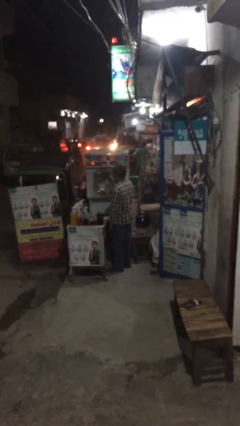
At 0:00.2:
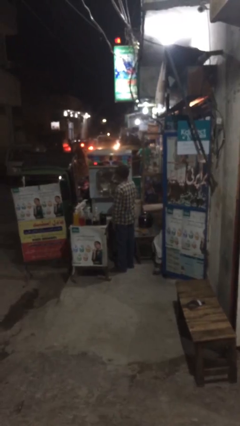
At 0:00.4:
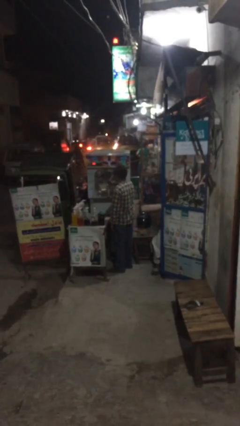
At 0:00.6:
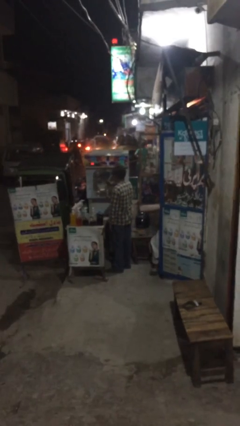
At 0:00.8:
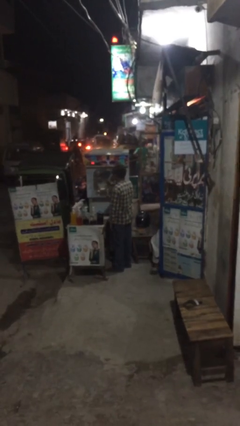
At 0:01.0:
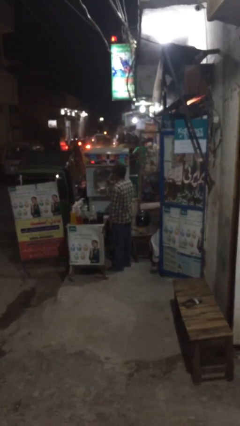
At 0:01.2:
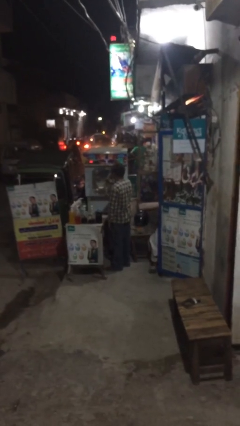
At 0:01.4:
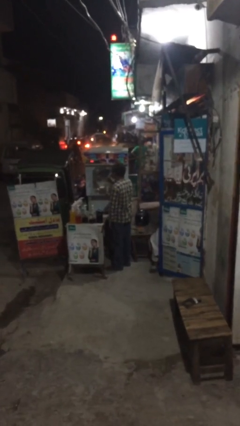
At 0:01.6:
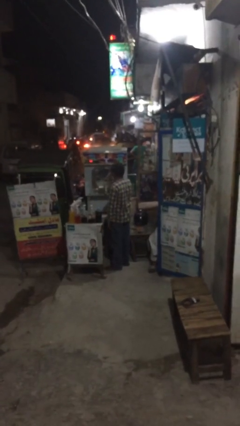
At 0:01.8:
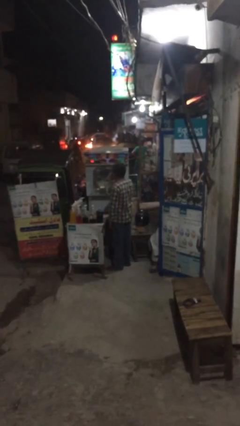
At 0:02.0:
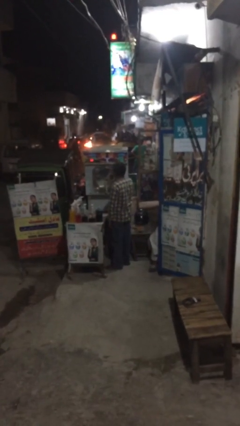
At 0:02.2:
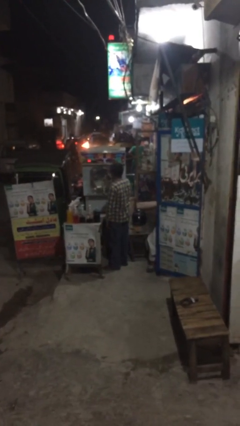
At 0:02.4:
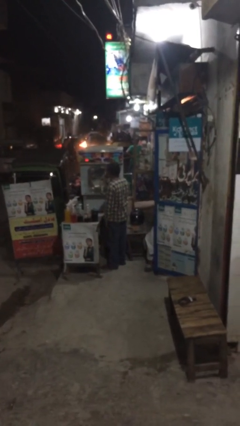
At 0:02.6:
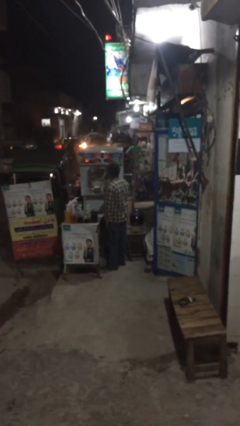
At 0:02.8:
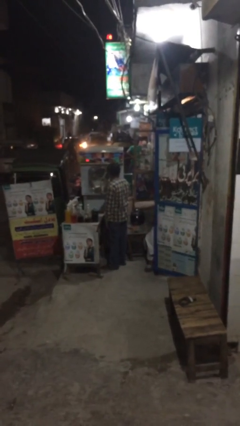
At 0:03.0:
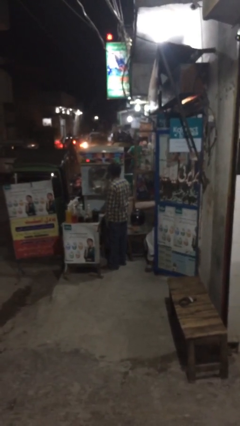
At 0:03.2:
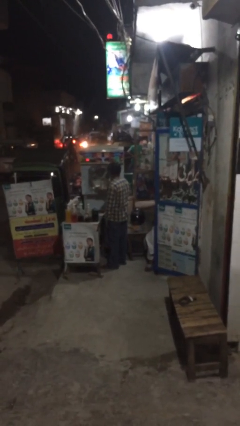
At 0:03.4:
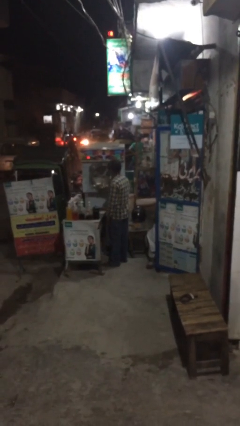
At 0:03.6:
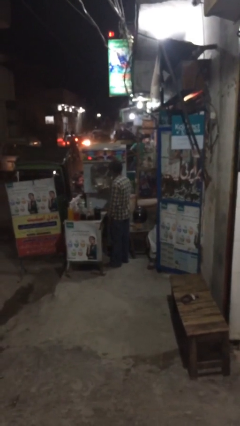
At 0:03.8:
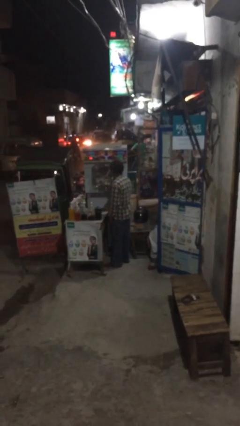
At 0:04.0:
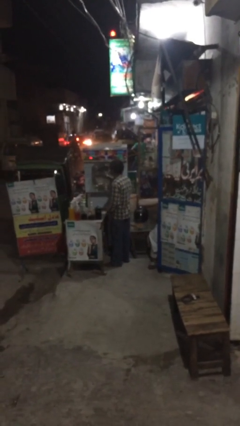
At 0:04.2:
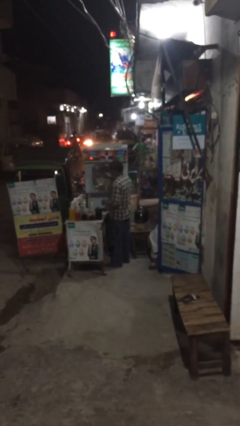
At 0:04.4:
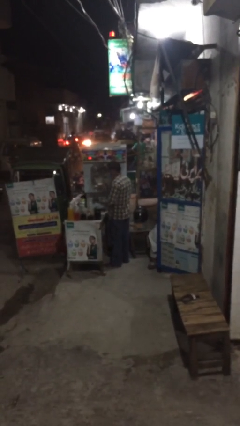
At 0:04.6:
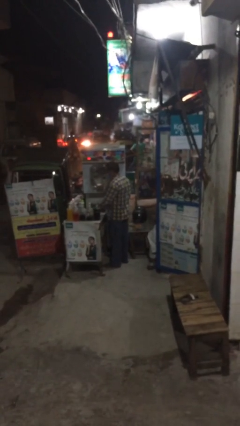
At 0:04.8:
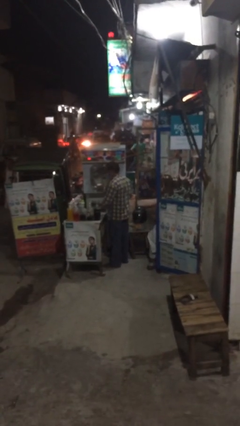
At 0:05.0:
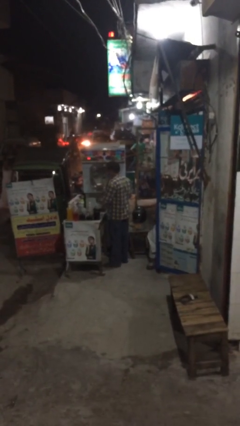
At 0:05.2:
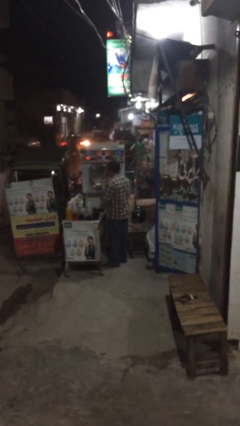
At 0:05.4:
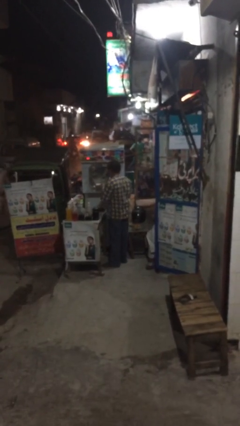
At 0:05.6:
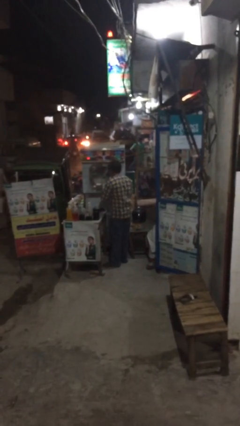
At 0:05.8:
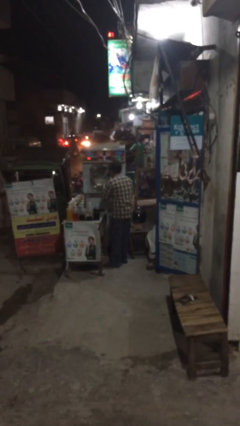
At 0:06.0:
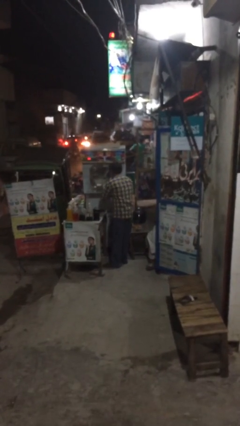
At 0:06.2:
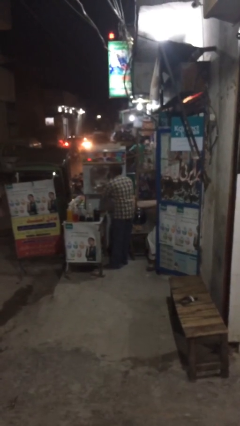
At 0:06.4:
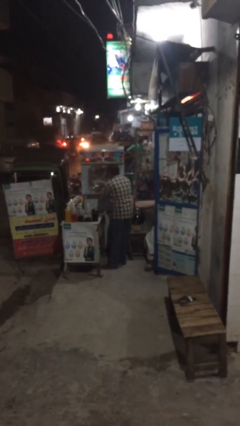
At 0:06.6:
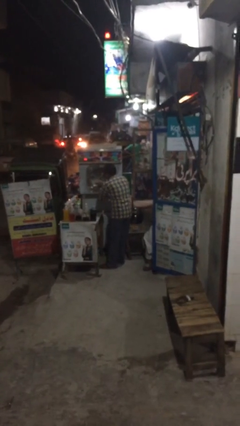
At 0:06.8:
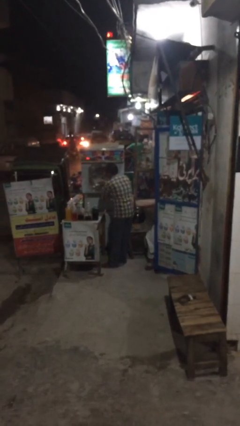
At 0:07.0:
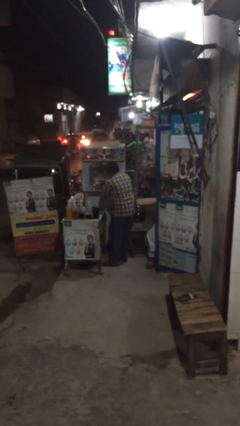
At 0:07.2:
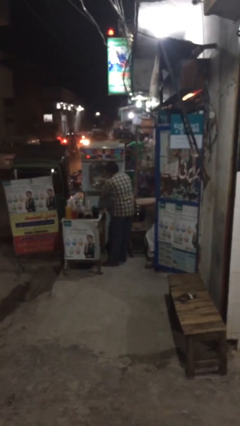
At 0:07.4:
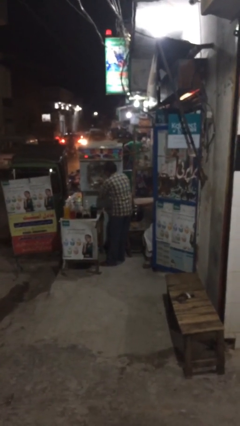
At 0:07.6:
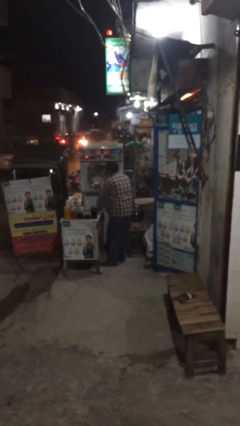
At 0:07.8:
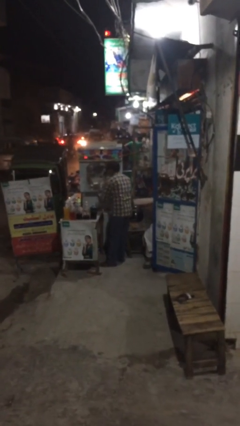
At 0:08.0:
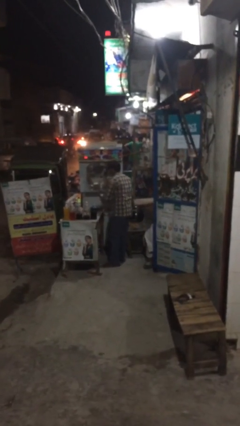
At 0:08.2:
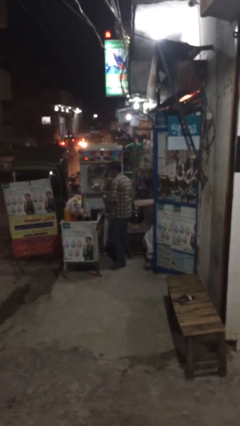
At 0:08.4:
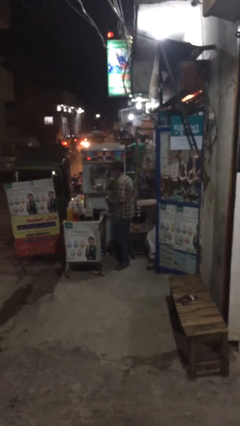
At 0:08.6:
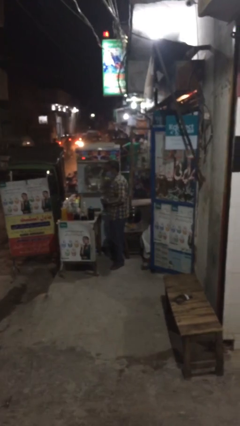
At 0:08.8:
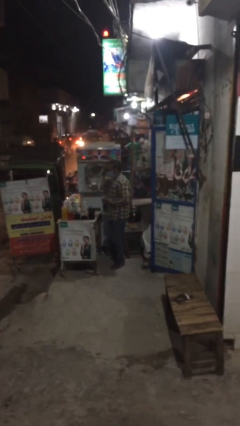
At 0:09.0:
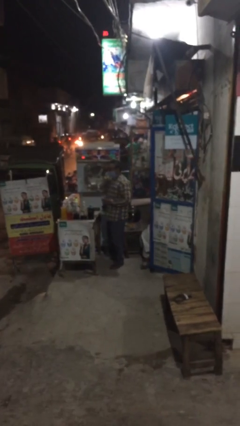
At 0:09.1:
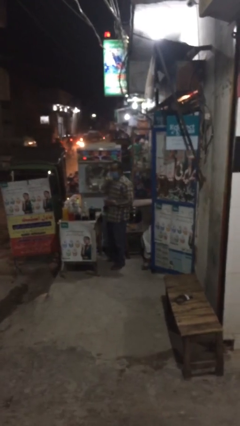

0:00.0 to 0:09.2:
person purchases from machine

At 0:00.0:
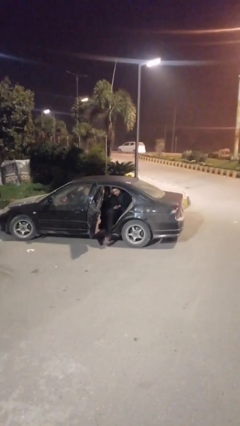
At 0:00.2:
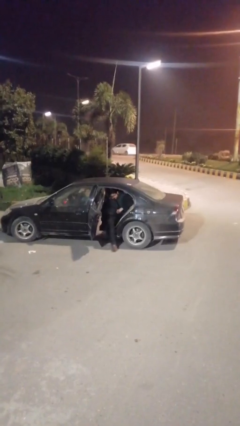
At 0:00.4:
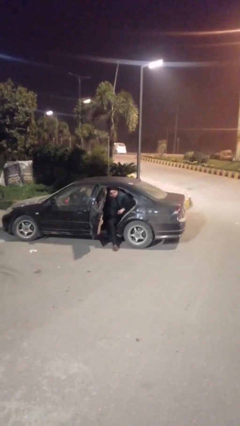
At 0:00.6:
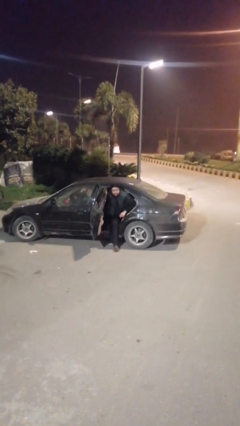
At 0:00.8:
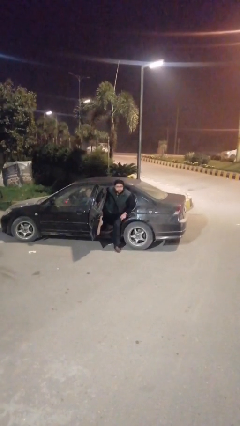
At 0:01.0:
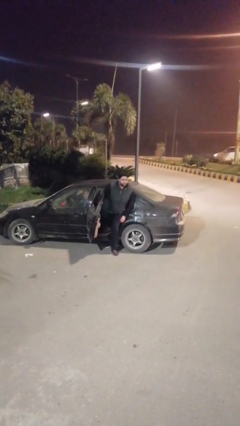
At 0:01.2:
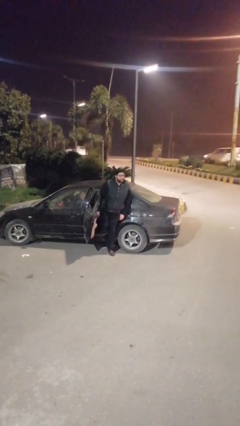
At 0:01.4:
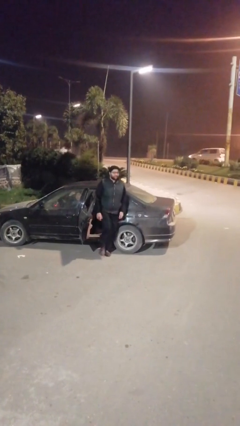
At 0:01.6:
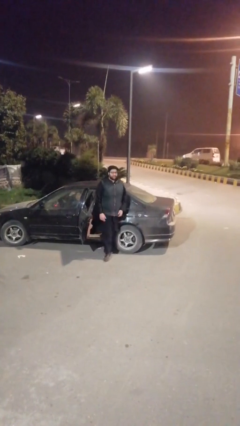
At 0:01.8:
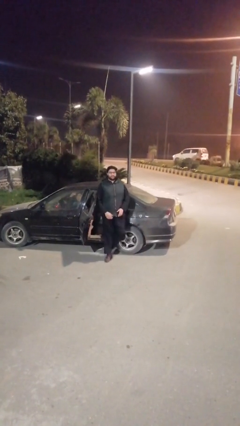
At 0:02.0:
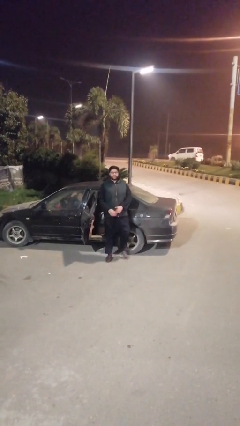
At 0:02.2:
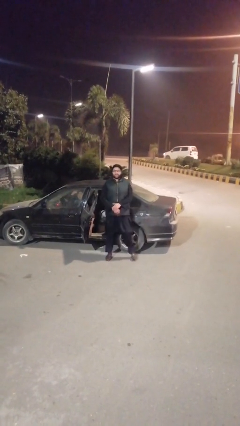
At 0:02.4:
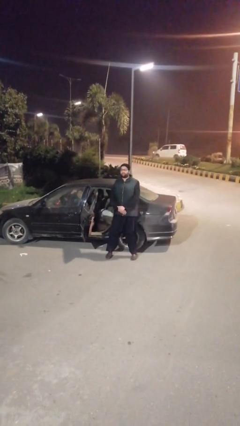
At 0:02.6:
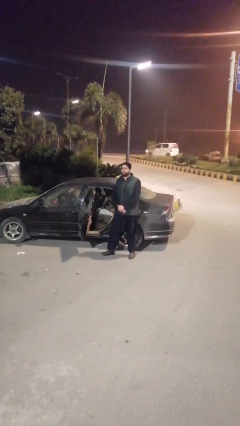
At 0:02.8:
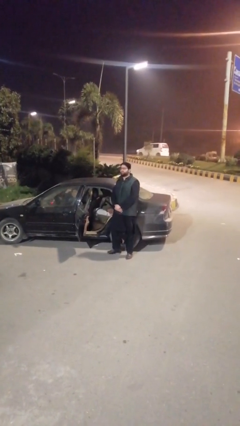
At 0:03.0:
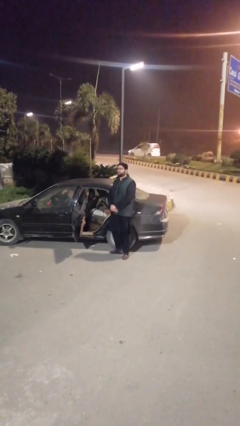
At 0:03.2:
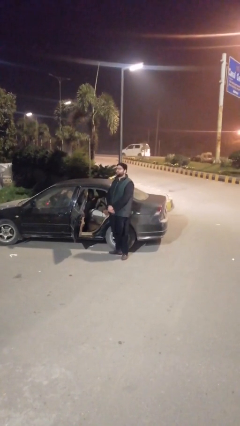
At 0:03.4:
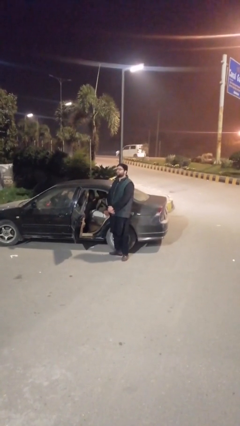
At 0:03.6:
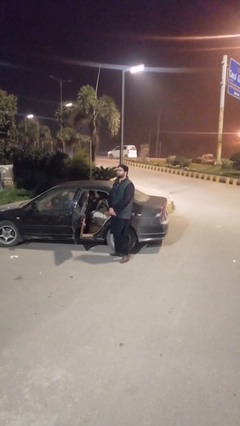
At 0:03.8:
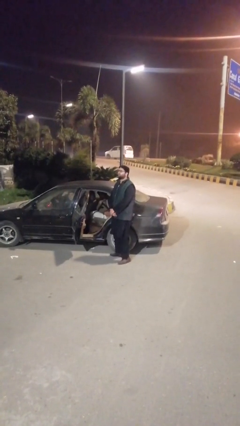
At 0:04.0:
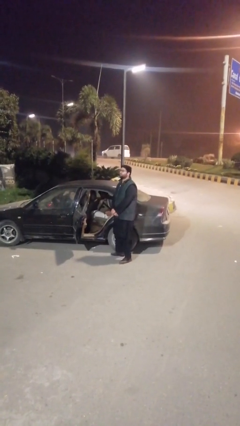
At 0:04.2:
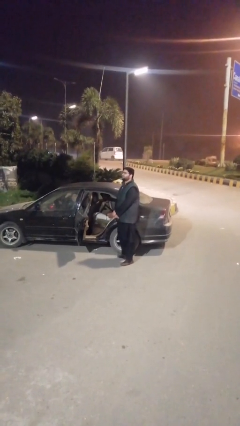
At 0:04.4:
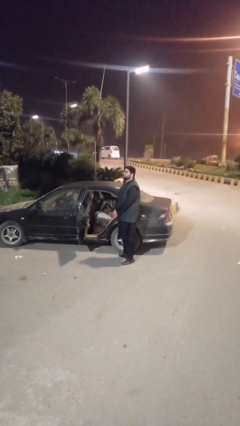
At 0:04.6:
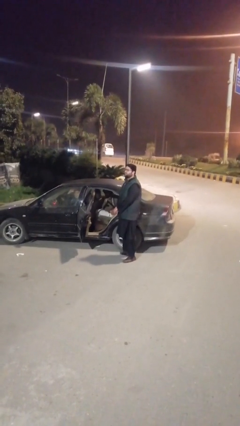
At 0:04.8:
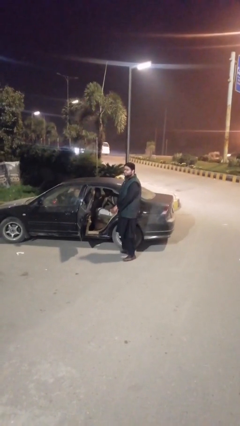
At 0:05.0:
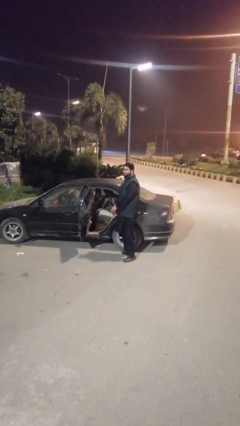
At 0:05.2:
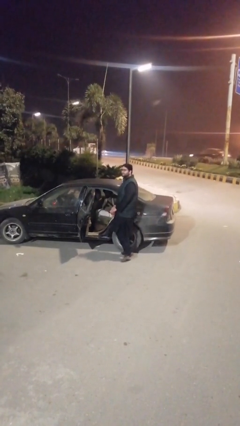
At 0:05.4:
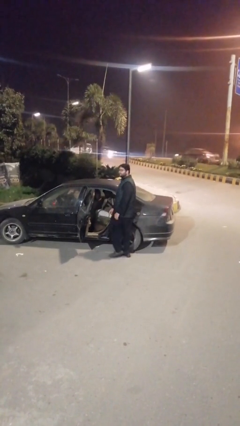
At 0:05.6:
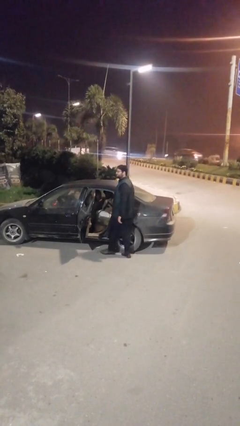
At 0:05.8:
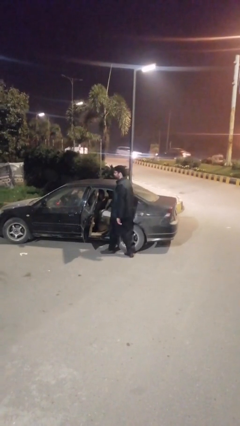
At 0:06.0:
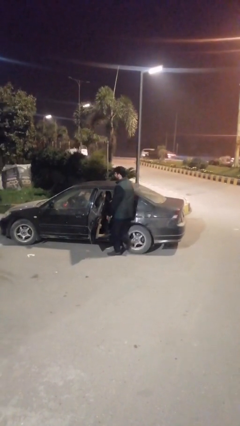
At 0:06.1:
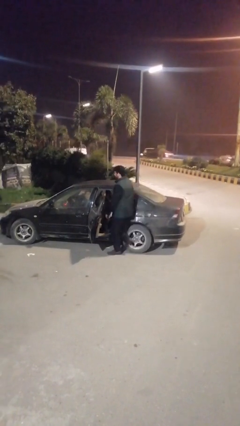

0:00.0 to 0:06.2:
person exits car

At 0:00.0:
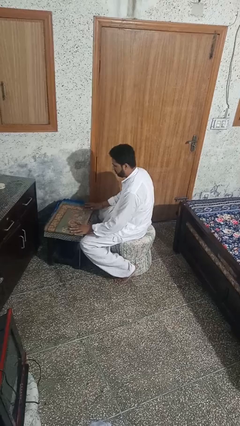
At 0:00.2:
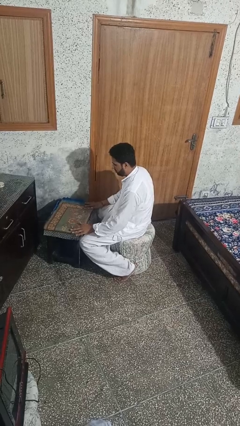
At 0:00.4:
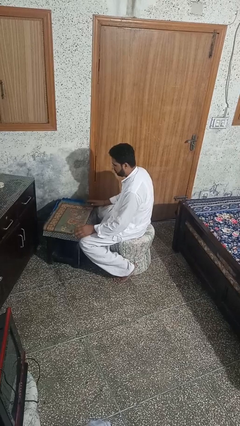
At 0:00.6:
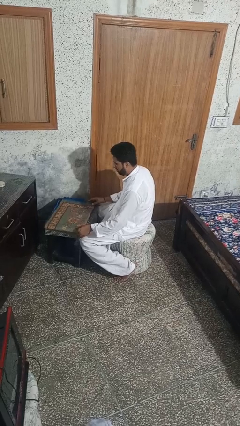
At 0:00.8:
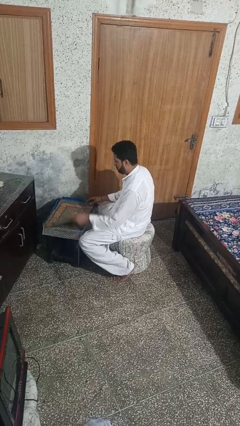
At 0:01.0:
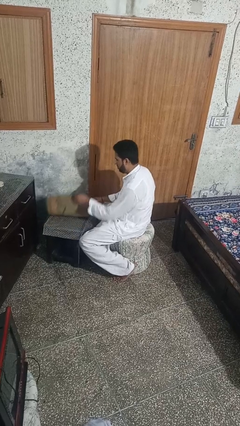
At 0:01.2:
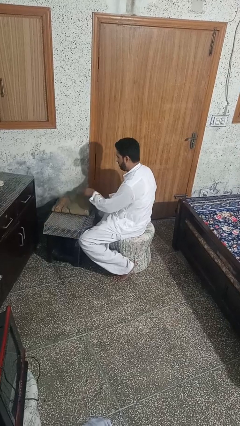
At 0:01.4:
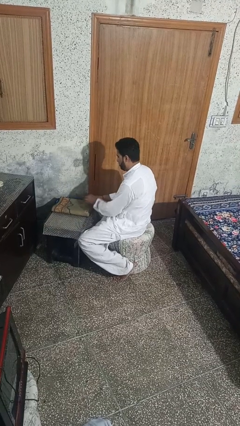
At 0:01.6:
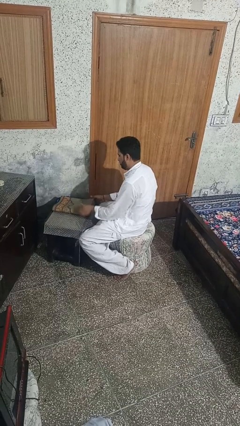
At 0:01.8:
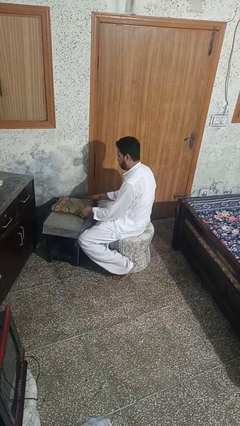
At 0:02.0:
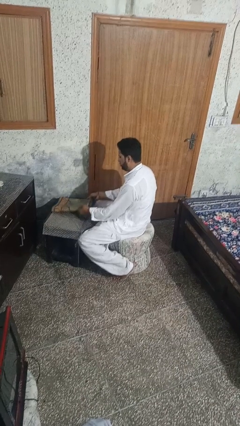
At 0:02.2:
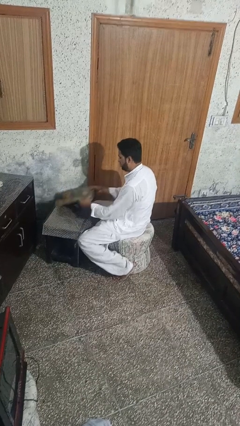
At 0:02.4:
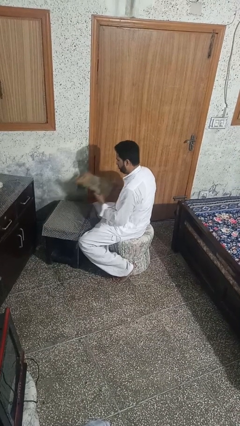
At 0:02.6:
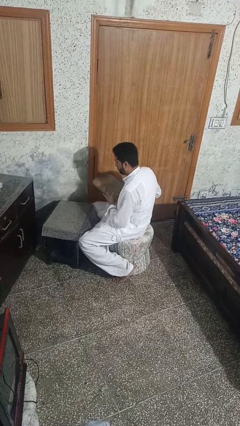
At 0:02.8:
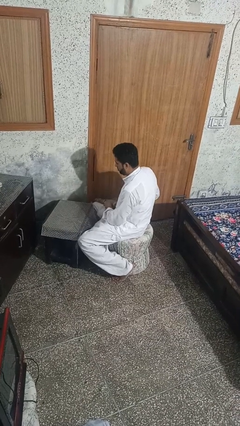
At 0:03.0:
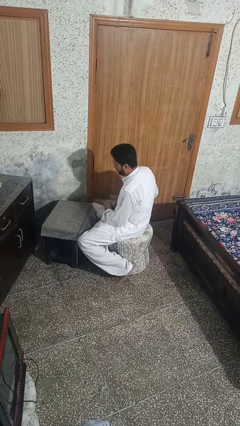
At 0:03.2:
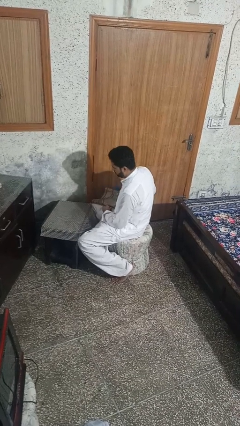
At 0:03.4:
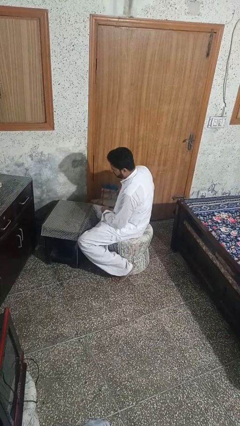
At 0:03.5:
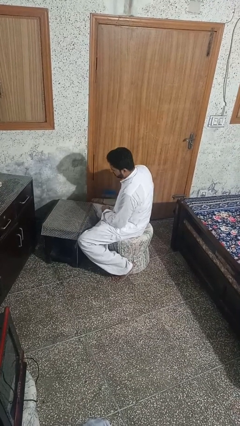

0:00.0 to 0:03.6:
person folds tablecloth
